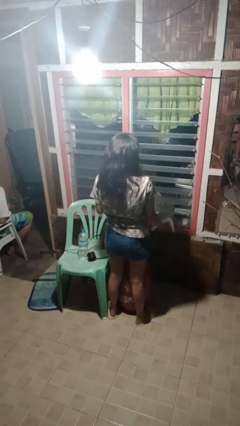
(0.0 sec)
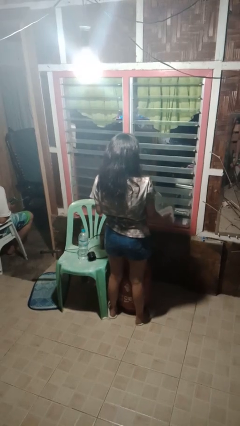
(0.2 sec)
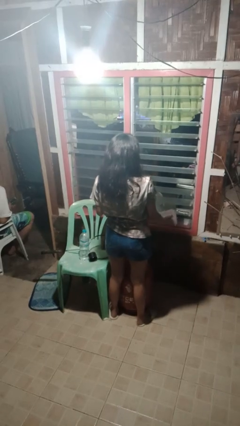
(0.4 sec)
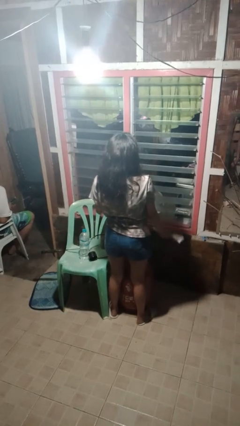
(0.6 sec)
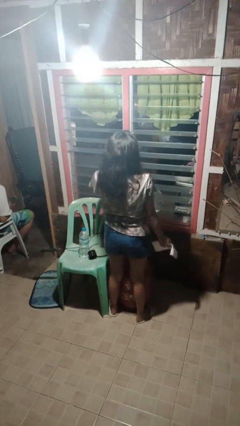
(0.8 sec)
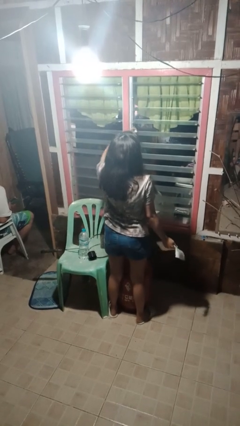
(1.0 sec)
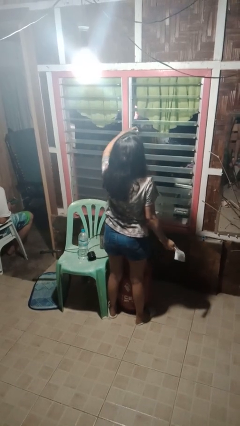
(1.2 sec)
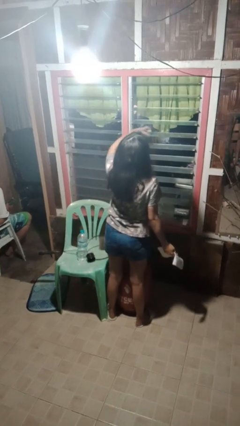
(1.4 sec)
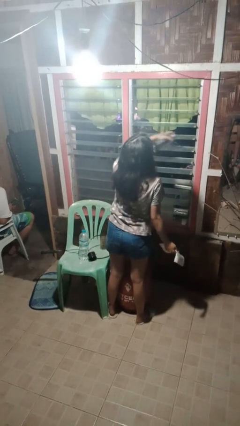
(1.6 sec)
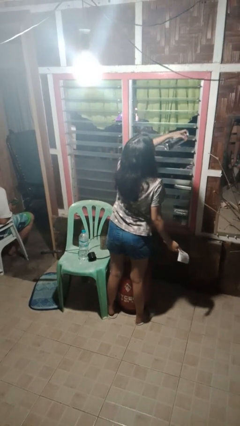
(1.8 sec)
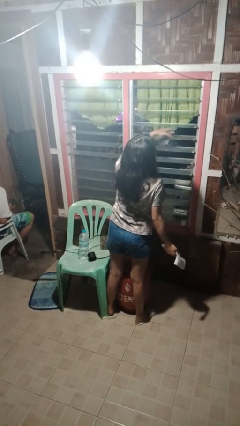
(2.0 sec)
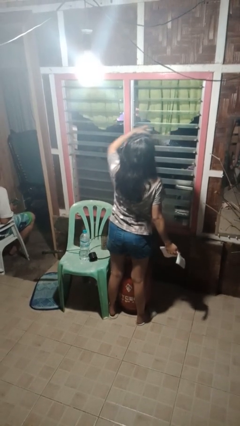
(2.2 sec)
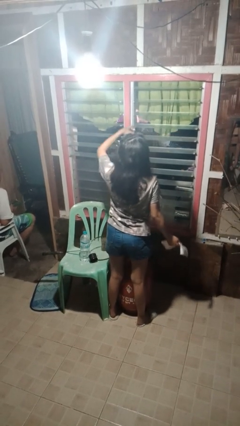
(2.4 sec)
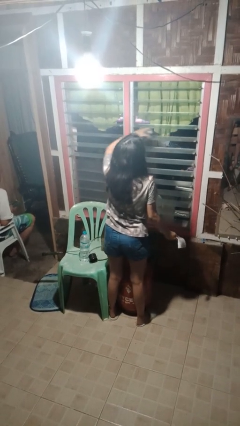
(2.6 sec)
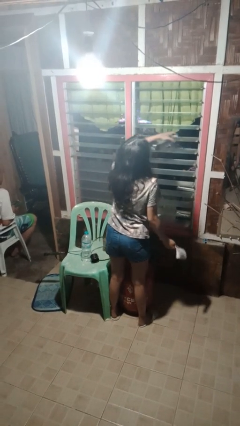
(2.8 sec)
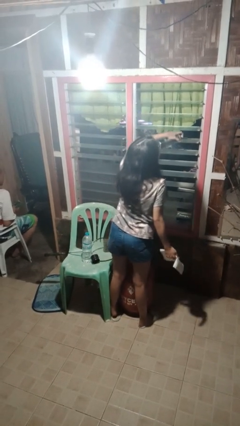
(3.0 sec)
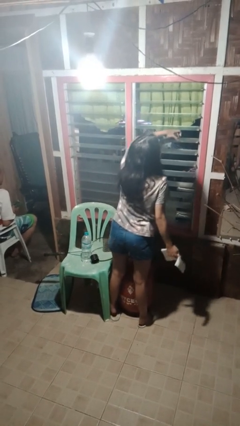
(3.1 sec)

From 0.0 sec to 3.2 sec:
person sprays from bottle

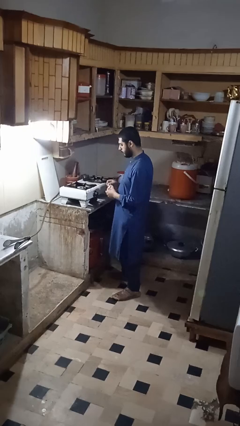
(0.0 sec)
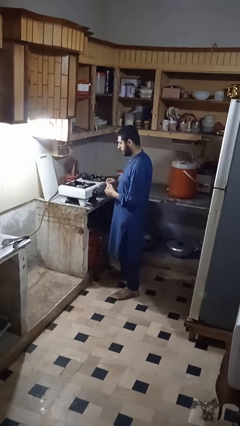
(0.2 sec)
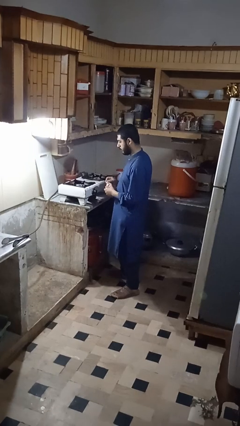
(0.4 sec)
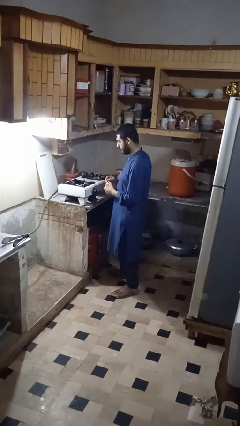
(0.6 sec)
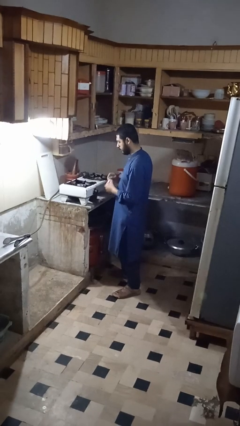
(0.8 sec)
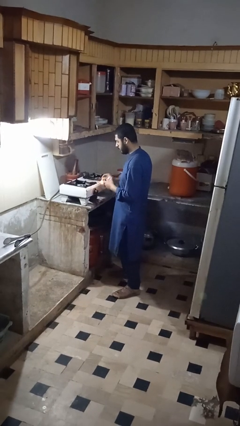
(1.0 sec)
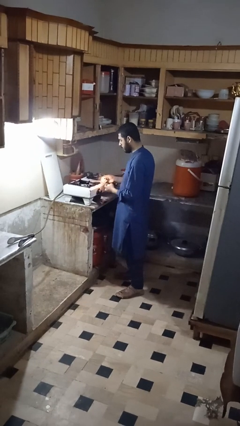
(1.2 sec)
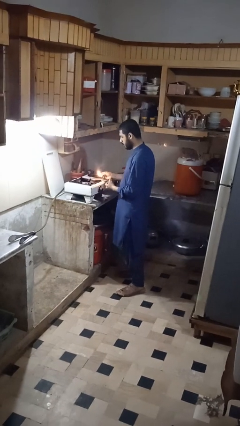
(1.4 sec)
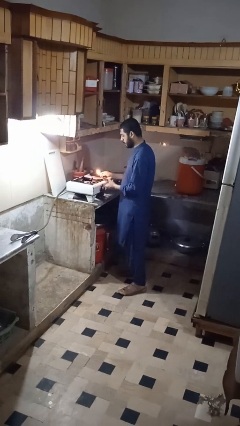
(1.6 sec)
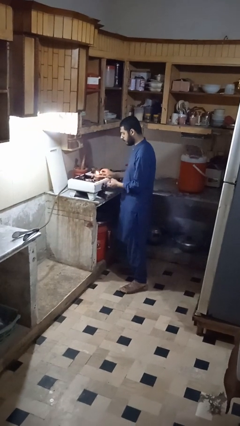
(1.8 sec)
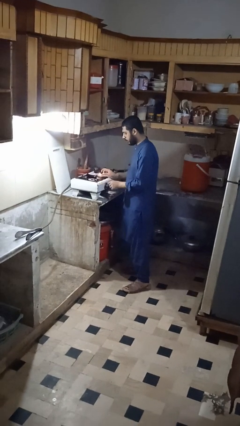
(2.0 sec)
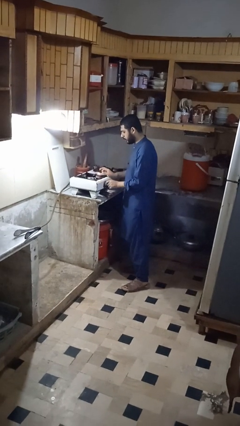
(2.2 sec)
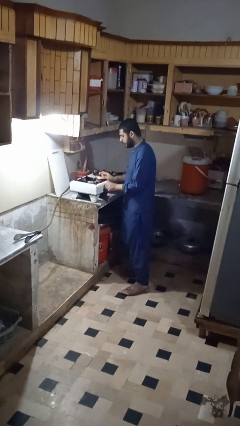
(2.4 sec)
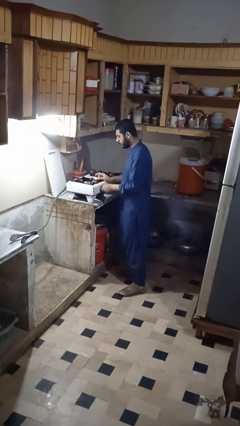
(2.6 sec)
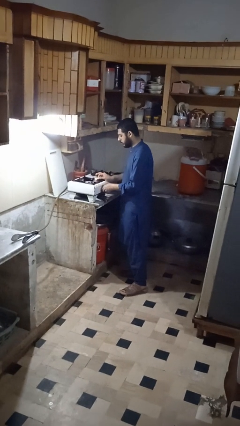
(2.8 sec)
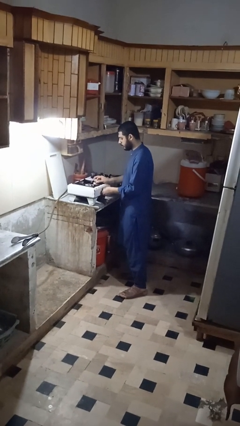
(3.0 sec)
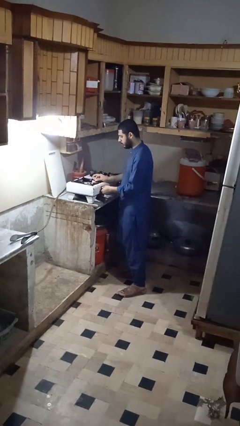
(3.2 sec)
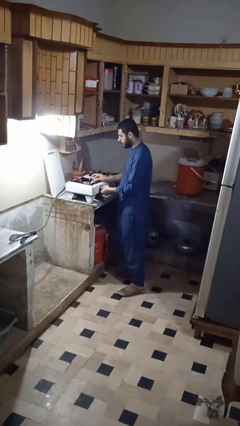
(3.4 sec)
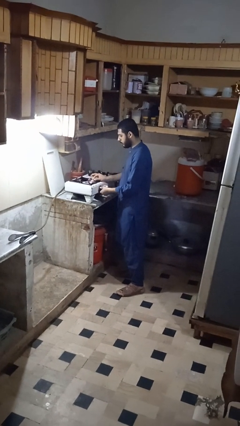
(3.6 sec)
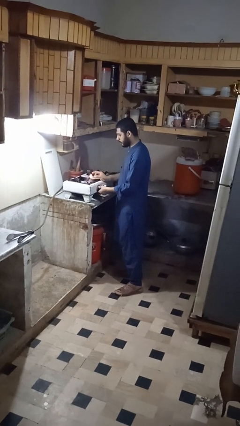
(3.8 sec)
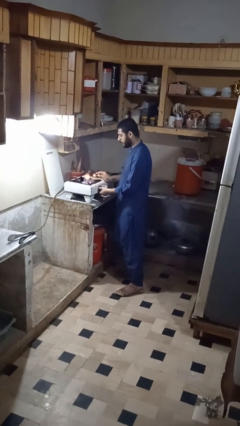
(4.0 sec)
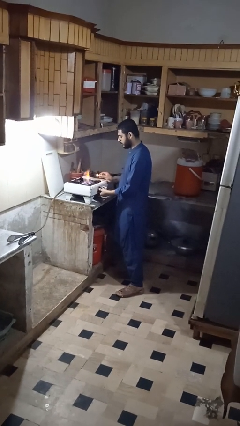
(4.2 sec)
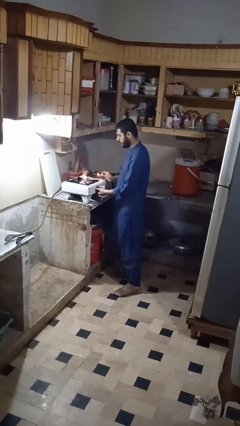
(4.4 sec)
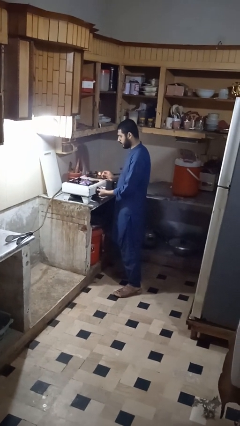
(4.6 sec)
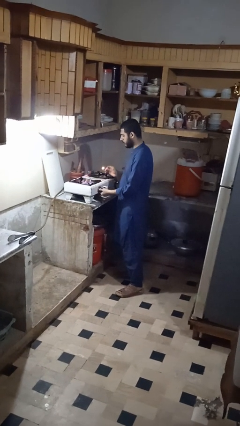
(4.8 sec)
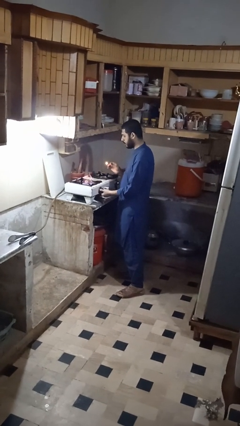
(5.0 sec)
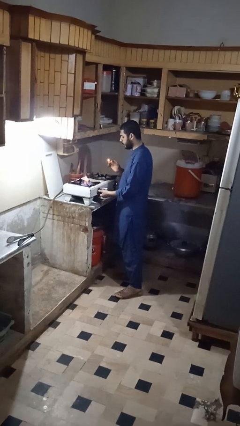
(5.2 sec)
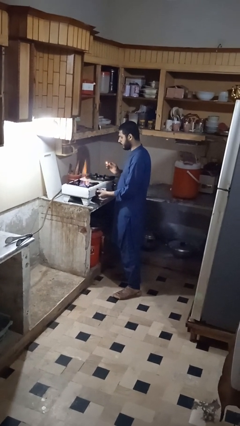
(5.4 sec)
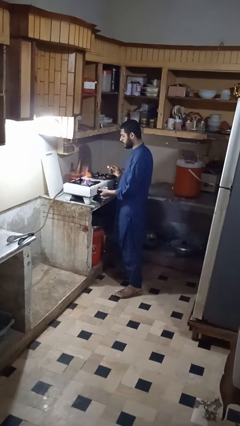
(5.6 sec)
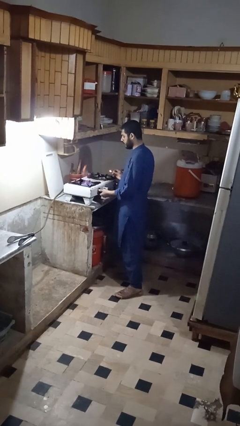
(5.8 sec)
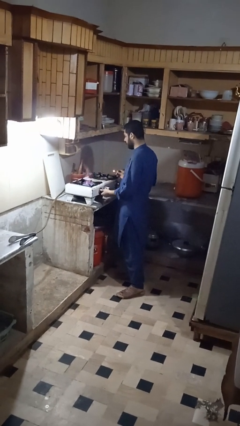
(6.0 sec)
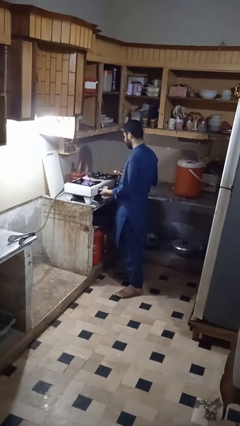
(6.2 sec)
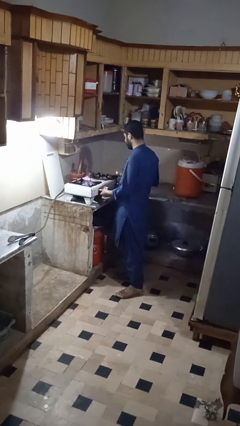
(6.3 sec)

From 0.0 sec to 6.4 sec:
person turns on stovetop

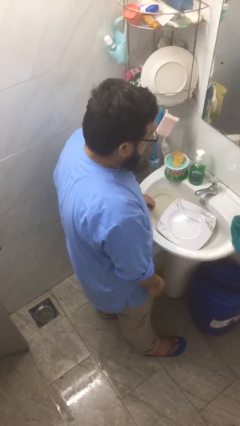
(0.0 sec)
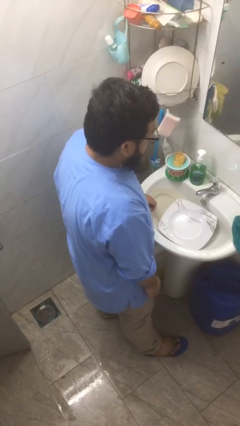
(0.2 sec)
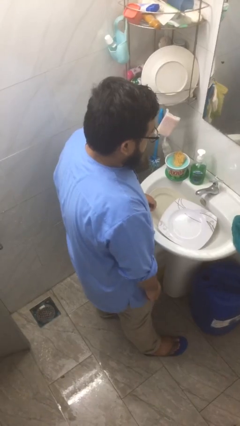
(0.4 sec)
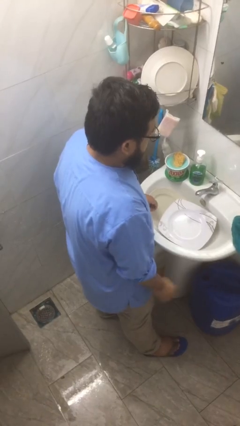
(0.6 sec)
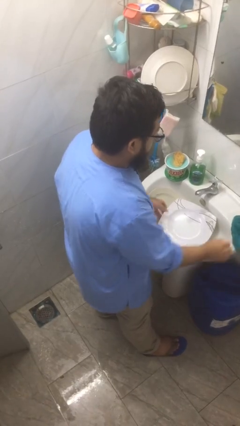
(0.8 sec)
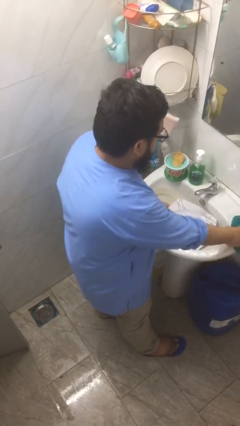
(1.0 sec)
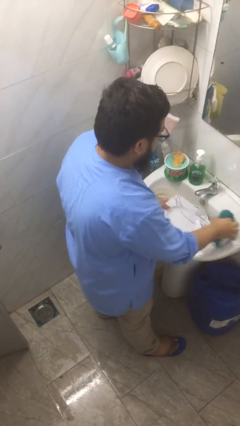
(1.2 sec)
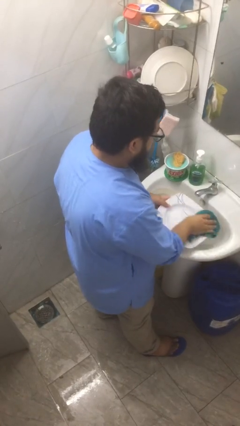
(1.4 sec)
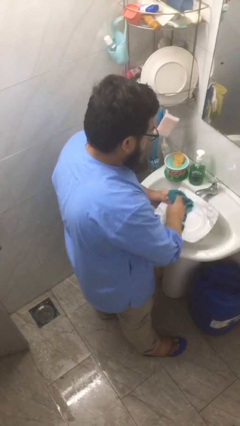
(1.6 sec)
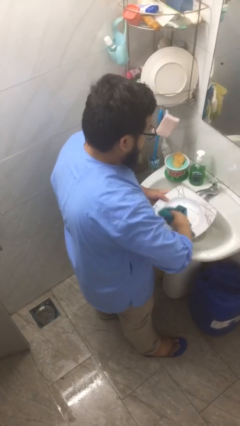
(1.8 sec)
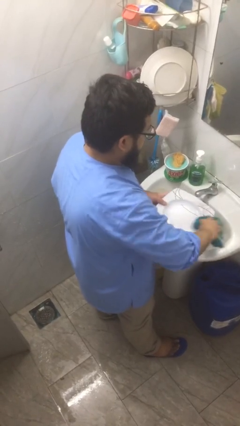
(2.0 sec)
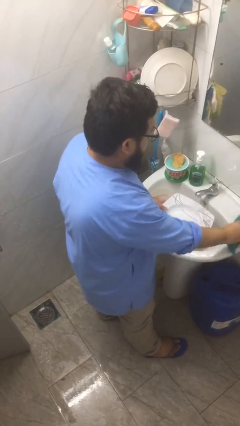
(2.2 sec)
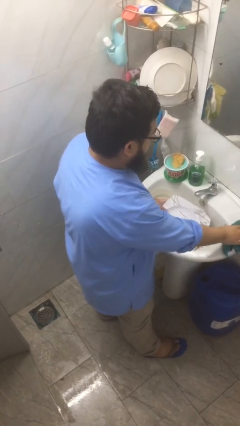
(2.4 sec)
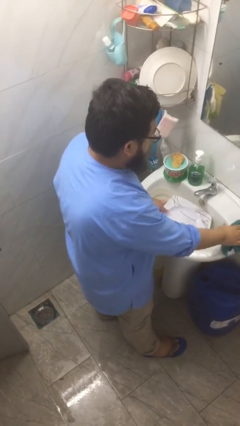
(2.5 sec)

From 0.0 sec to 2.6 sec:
person dries dish

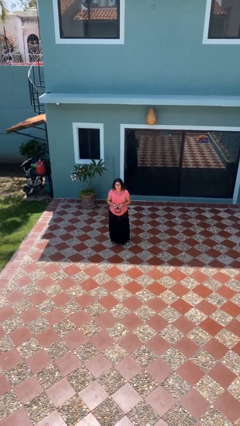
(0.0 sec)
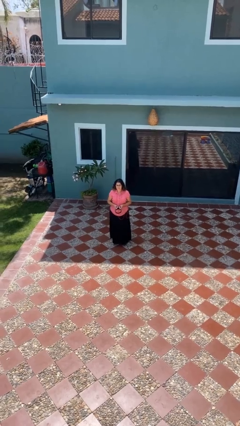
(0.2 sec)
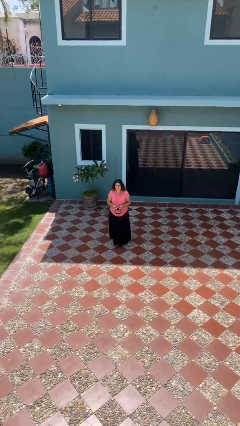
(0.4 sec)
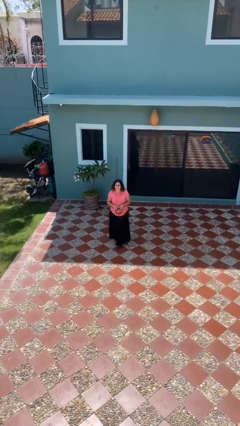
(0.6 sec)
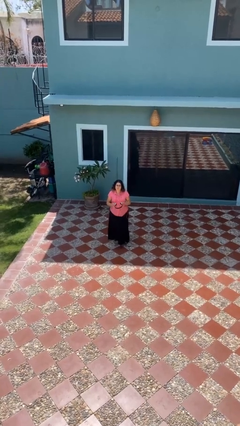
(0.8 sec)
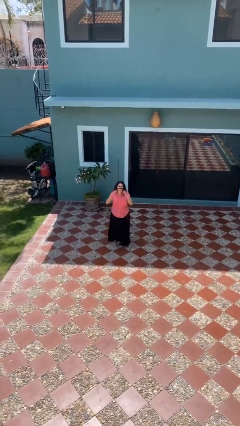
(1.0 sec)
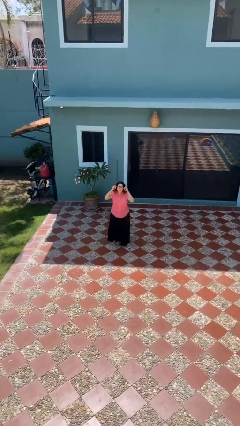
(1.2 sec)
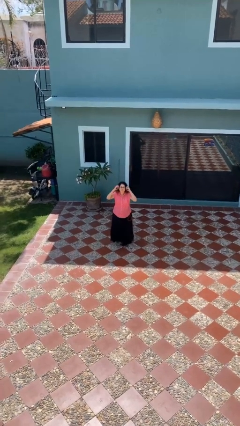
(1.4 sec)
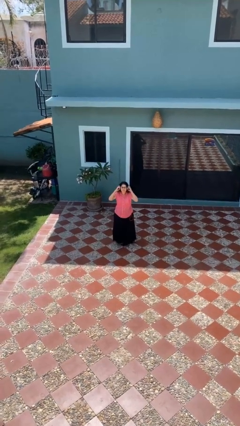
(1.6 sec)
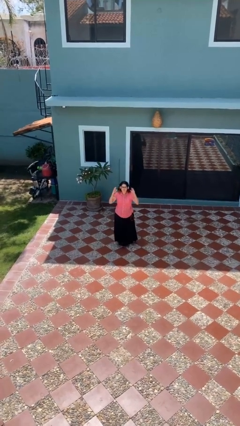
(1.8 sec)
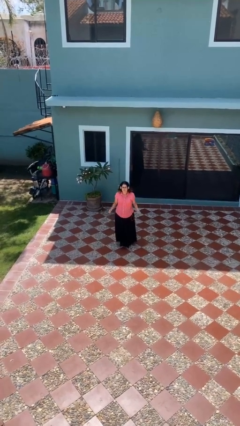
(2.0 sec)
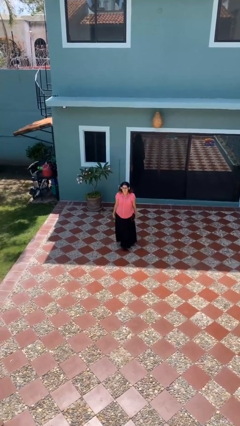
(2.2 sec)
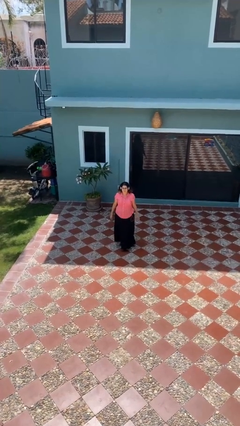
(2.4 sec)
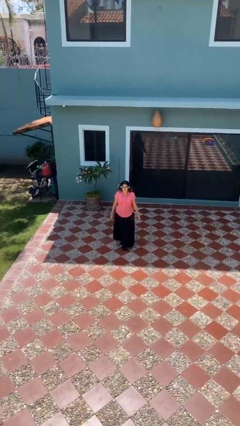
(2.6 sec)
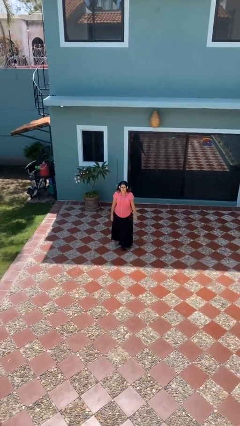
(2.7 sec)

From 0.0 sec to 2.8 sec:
person puts on headphones

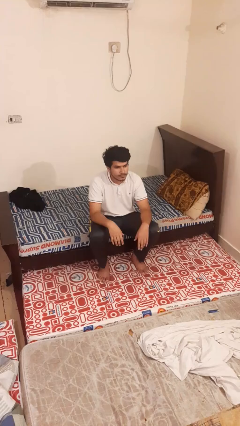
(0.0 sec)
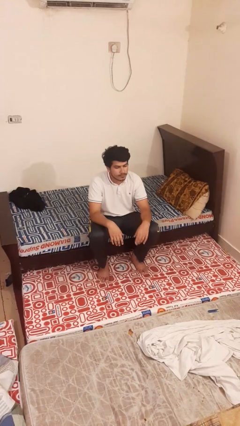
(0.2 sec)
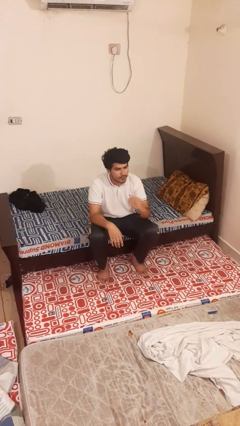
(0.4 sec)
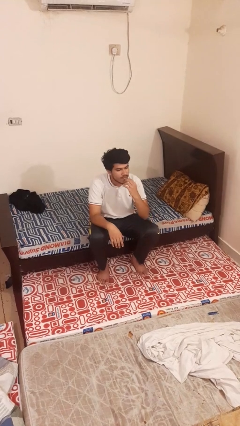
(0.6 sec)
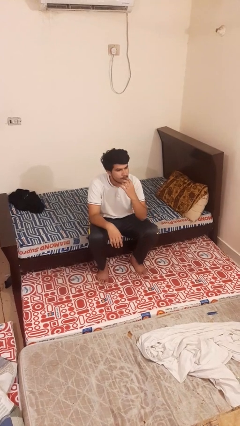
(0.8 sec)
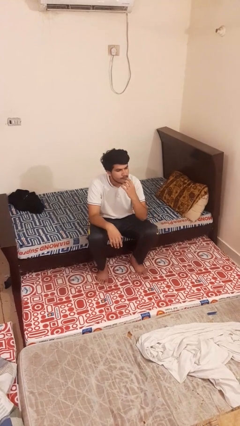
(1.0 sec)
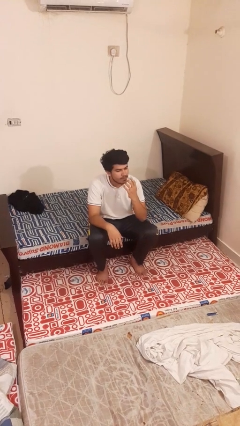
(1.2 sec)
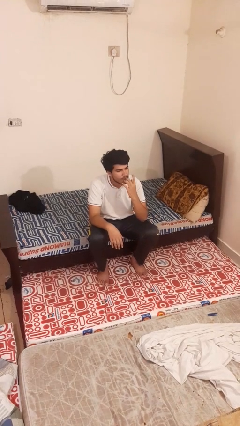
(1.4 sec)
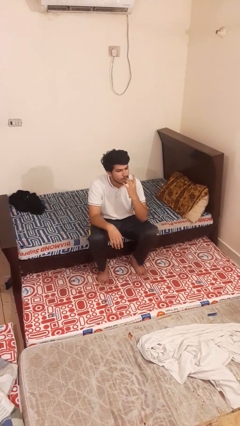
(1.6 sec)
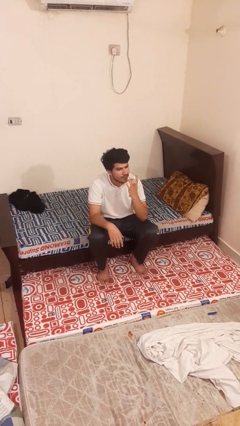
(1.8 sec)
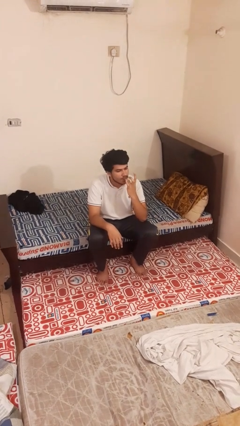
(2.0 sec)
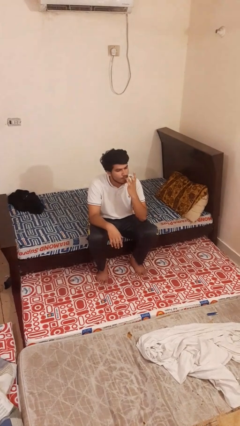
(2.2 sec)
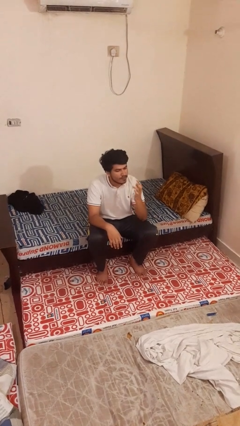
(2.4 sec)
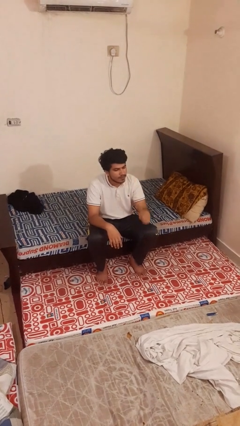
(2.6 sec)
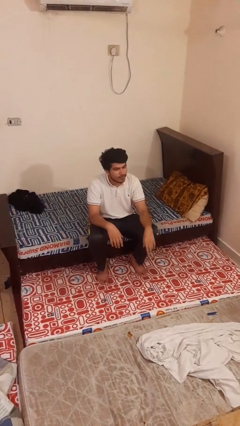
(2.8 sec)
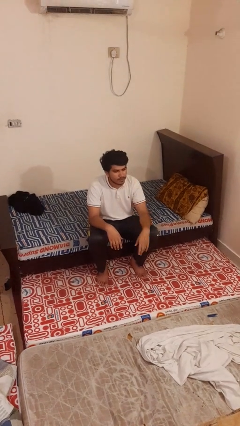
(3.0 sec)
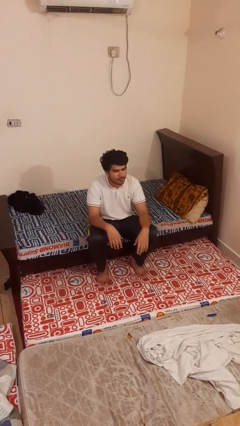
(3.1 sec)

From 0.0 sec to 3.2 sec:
person licks fingers
